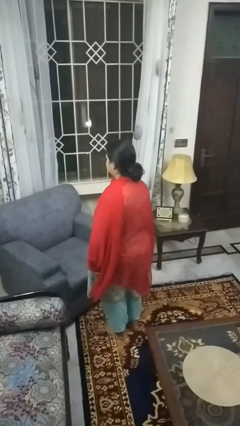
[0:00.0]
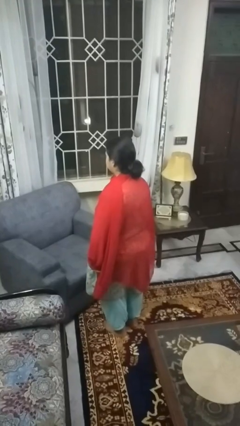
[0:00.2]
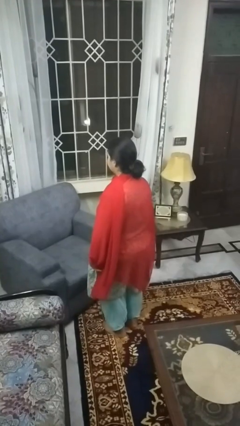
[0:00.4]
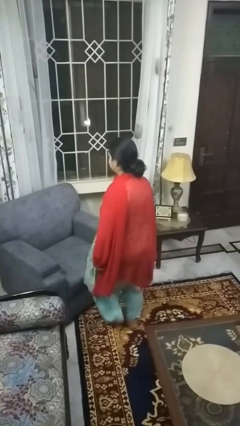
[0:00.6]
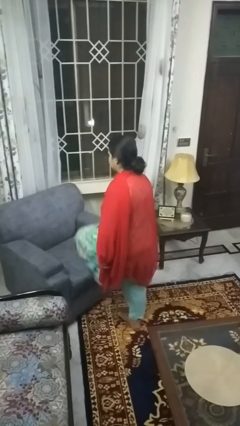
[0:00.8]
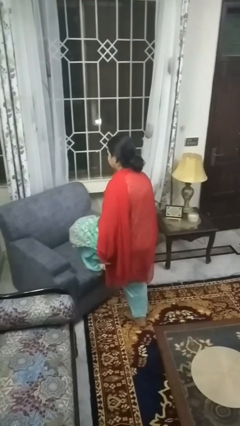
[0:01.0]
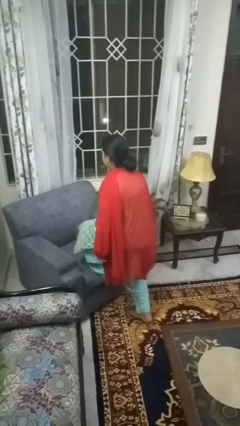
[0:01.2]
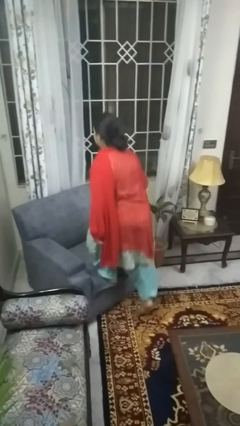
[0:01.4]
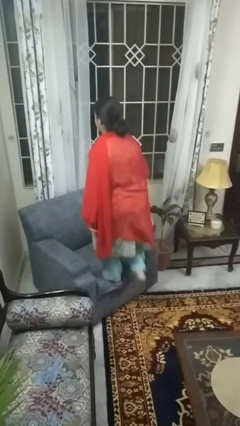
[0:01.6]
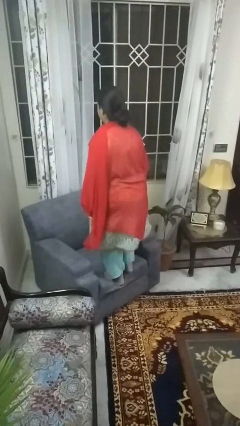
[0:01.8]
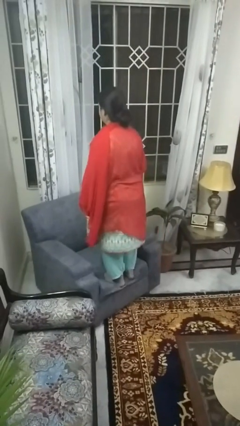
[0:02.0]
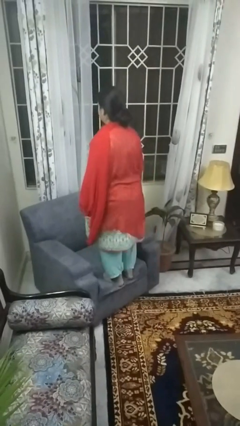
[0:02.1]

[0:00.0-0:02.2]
person climbs on couch

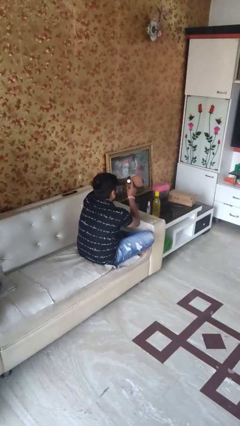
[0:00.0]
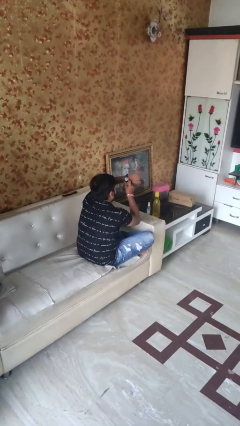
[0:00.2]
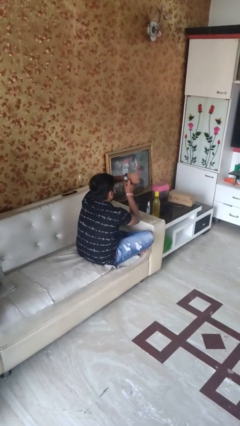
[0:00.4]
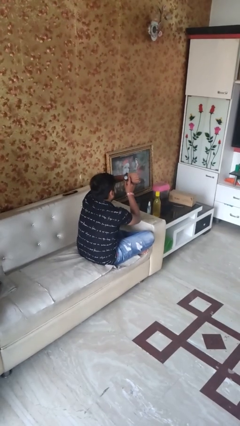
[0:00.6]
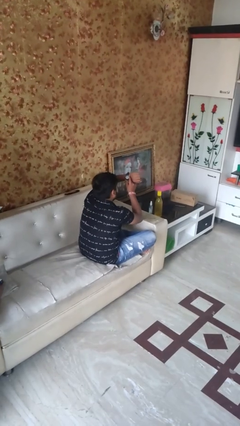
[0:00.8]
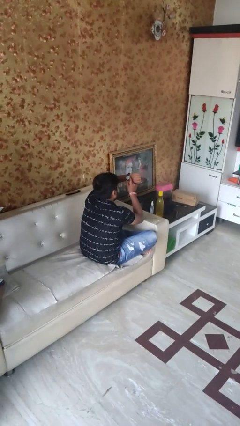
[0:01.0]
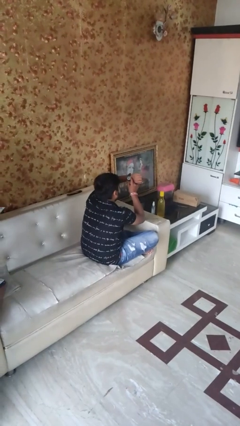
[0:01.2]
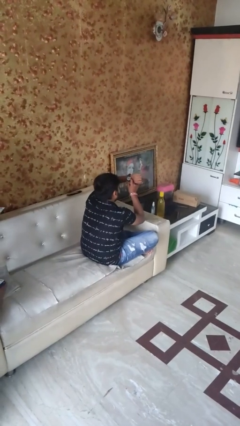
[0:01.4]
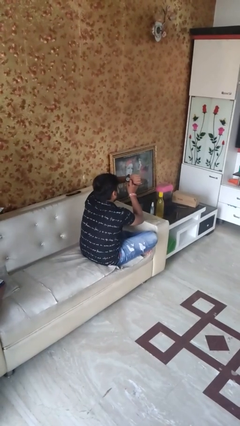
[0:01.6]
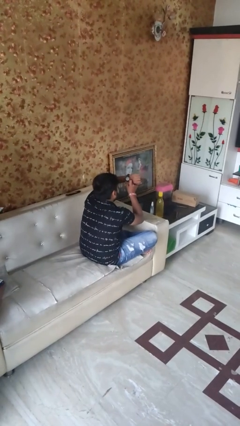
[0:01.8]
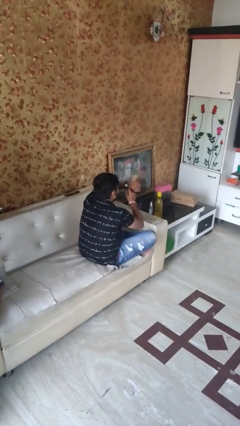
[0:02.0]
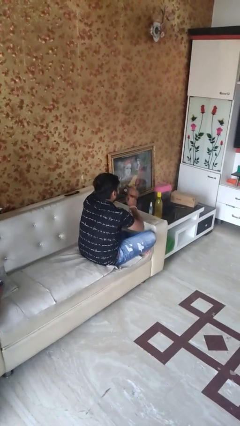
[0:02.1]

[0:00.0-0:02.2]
person looks at wristwatch

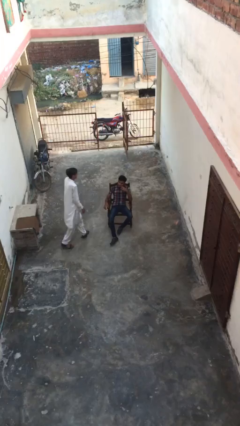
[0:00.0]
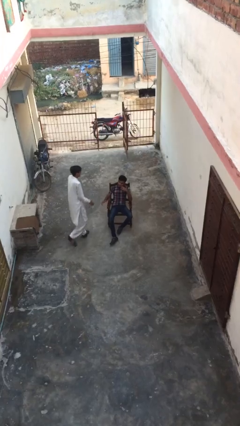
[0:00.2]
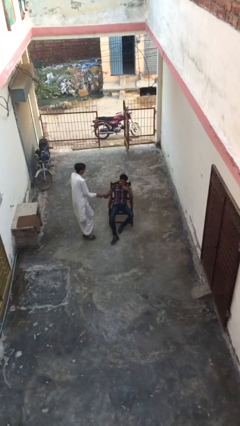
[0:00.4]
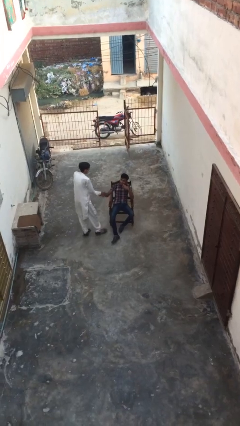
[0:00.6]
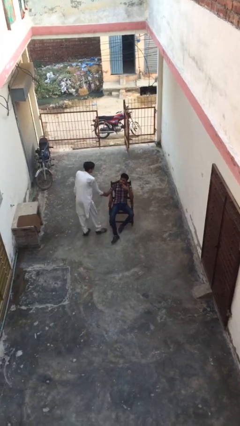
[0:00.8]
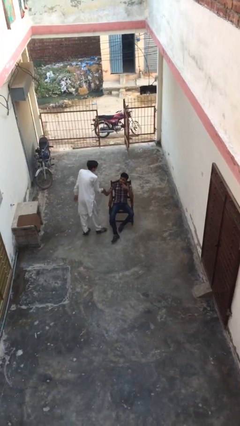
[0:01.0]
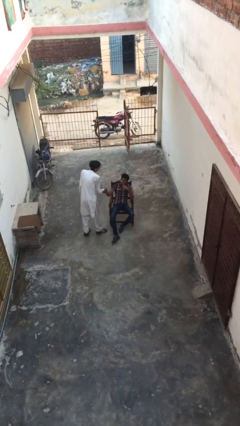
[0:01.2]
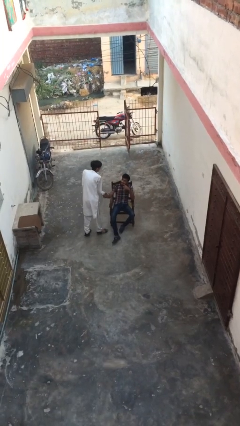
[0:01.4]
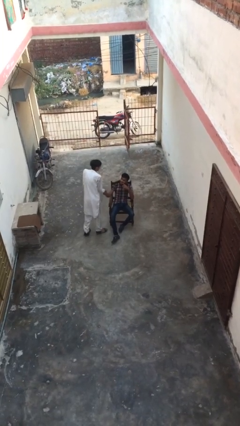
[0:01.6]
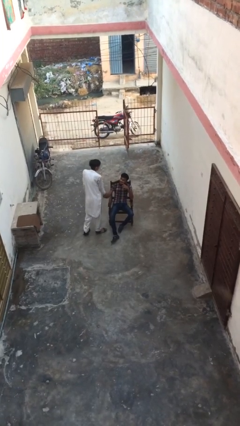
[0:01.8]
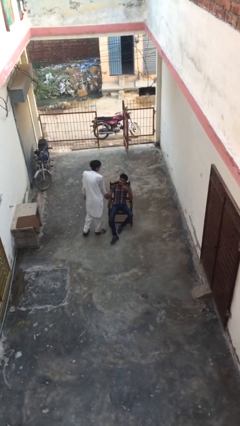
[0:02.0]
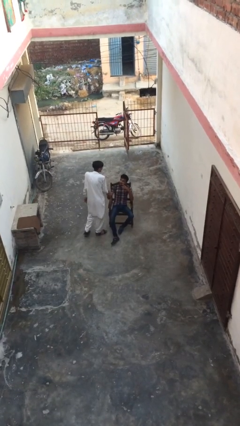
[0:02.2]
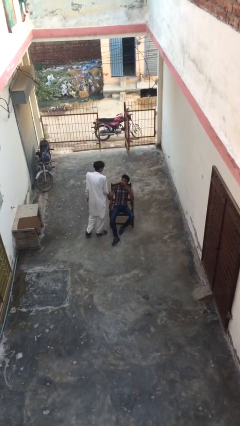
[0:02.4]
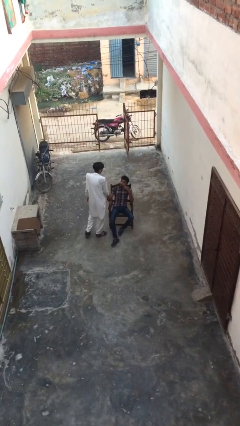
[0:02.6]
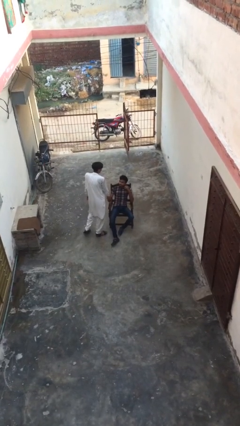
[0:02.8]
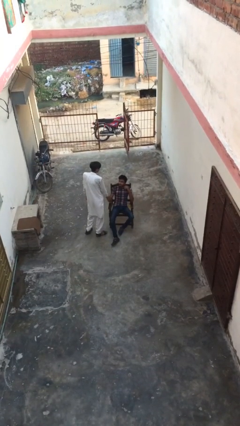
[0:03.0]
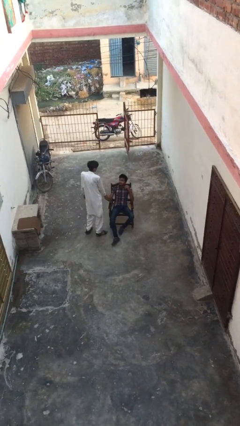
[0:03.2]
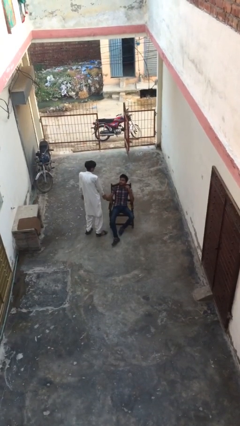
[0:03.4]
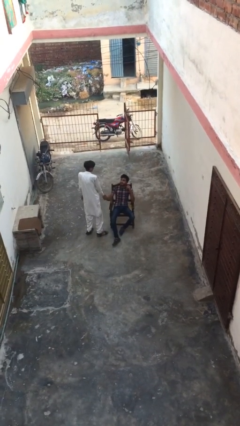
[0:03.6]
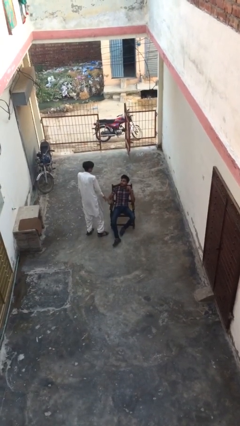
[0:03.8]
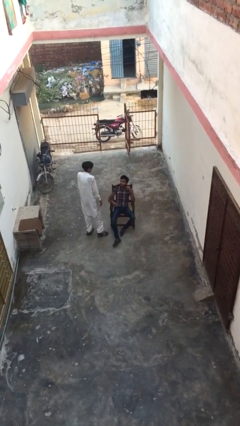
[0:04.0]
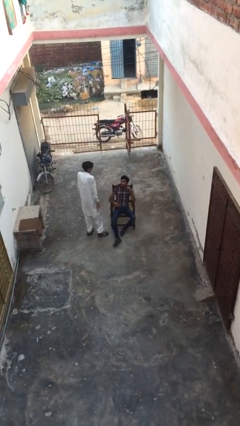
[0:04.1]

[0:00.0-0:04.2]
person shakes hand

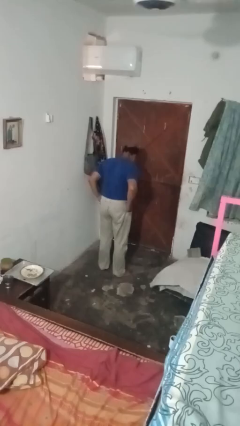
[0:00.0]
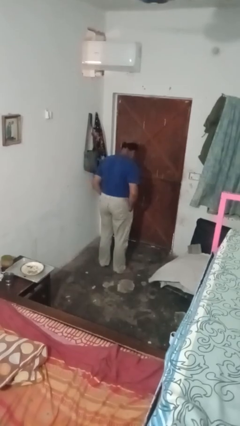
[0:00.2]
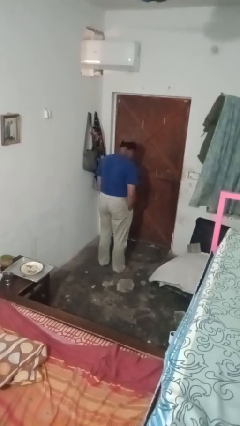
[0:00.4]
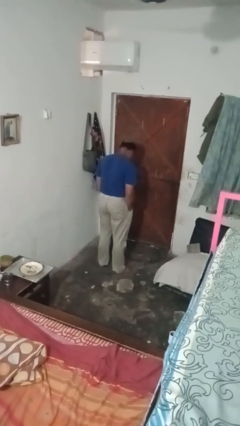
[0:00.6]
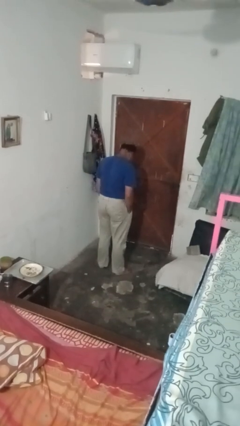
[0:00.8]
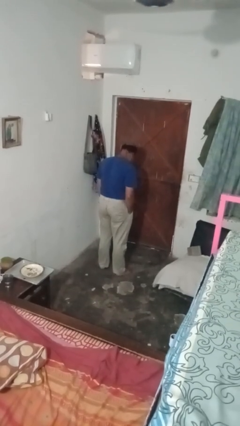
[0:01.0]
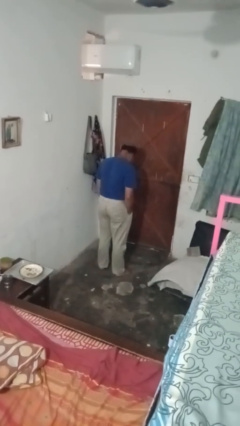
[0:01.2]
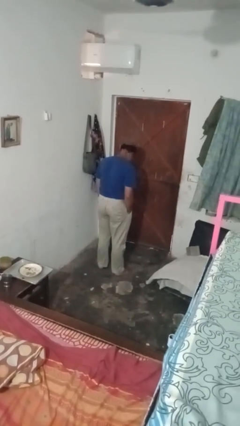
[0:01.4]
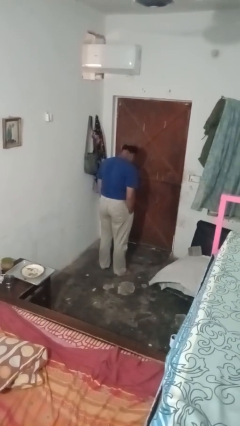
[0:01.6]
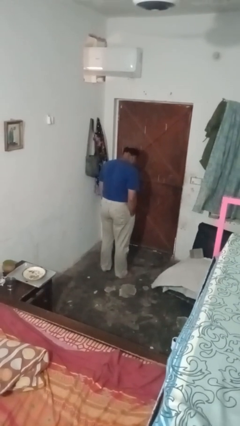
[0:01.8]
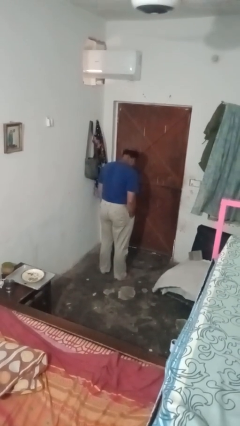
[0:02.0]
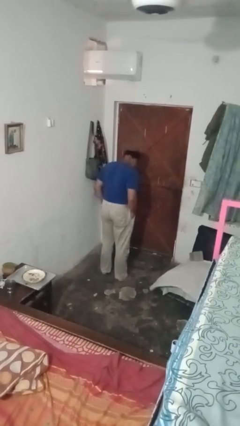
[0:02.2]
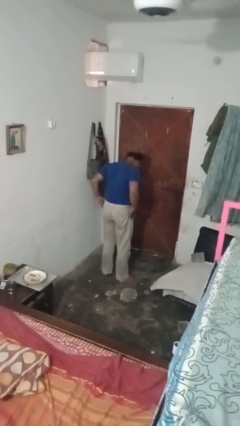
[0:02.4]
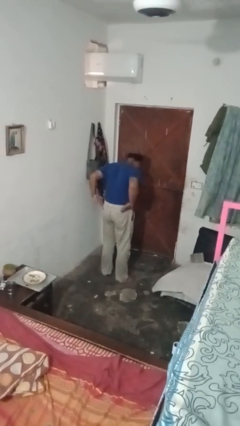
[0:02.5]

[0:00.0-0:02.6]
person puts hands in back pockets

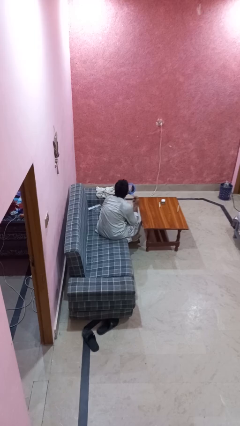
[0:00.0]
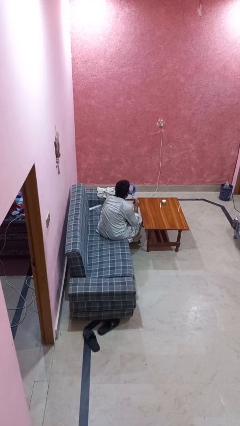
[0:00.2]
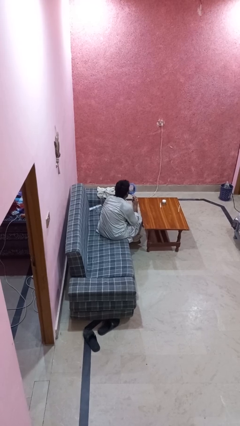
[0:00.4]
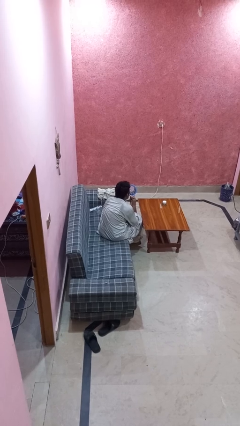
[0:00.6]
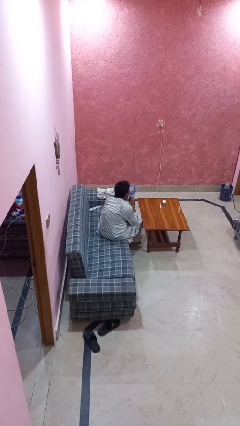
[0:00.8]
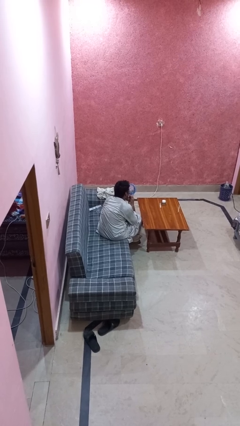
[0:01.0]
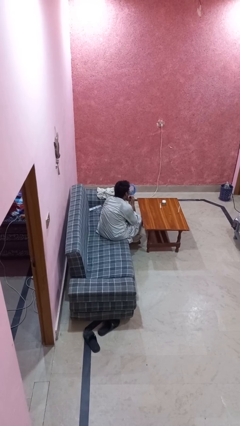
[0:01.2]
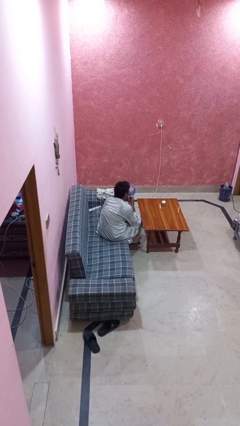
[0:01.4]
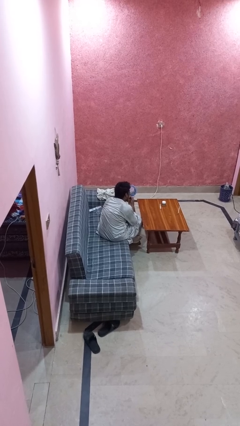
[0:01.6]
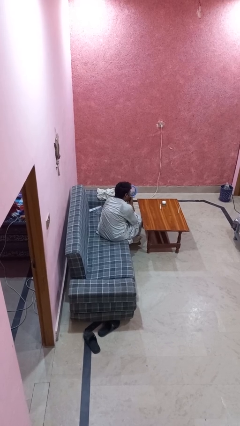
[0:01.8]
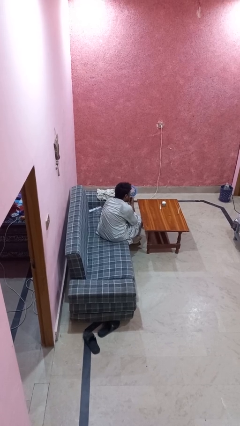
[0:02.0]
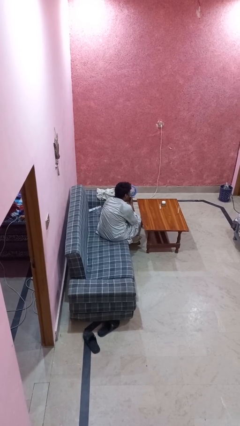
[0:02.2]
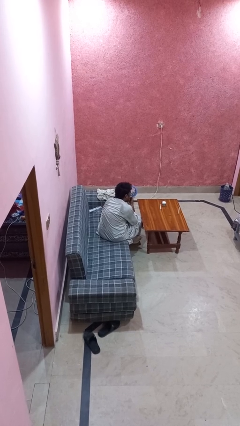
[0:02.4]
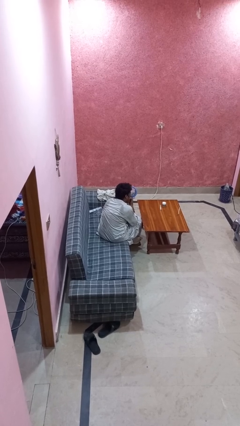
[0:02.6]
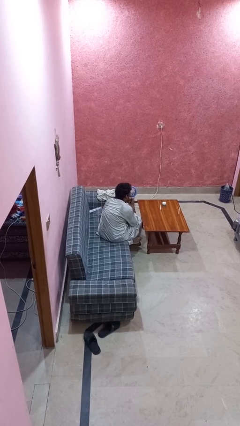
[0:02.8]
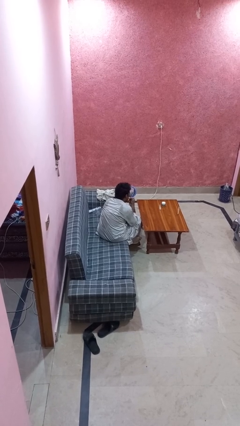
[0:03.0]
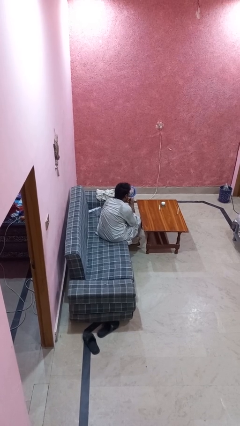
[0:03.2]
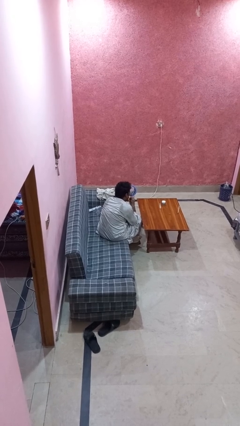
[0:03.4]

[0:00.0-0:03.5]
person applies lip makeup

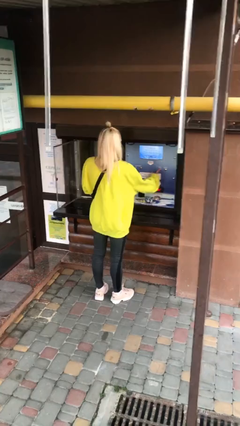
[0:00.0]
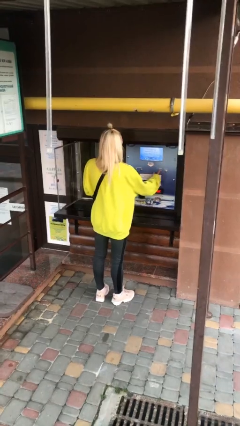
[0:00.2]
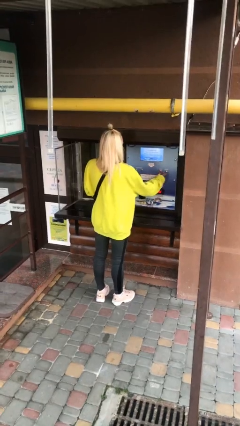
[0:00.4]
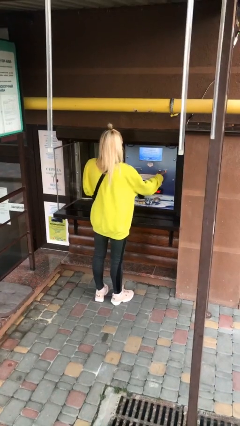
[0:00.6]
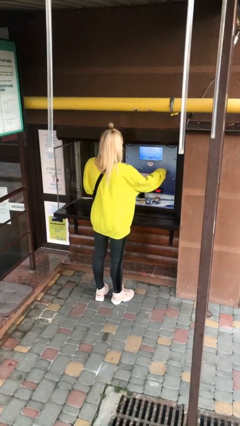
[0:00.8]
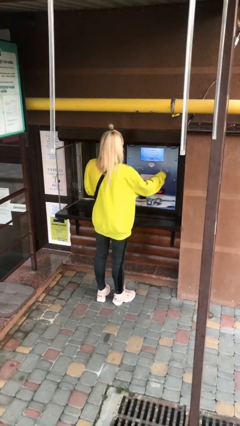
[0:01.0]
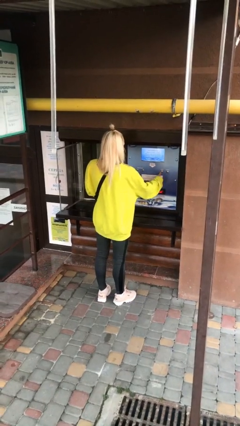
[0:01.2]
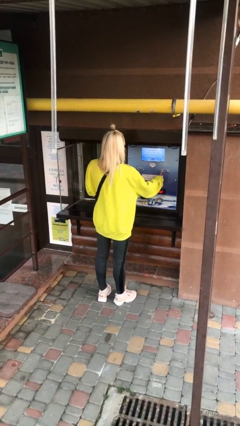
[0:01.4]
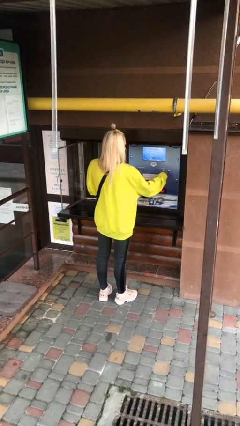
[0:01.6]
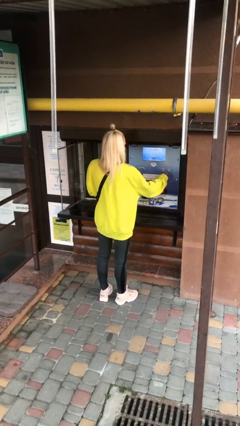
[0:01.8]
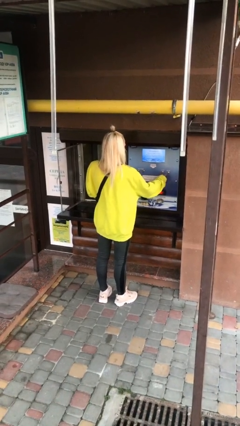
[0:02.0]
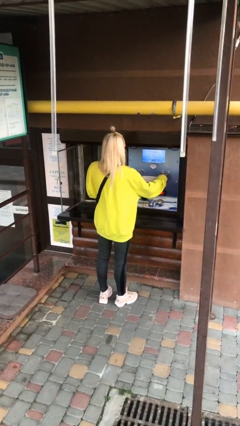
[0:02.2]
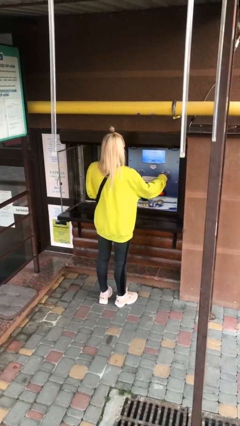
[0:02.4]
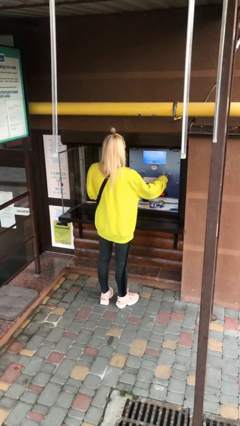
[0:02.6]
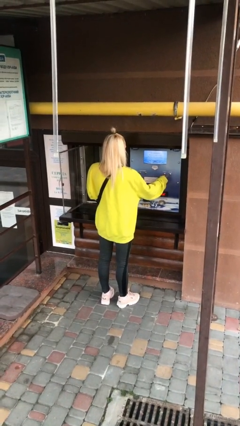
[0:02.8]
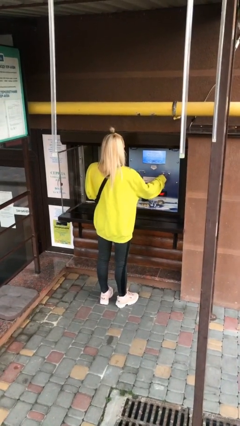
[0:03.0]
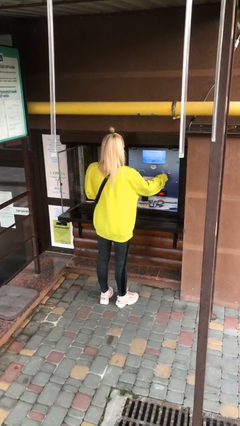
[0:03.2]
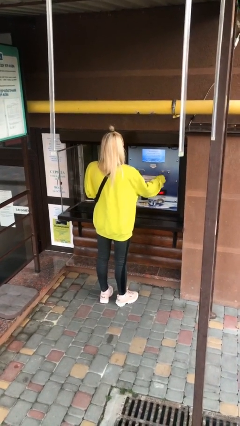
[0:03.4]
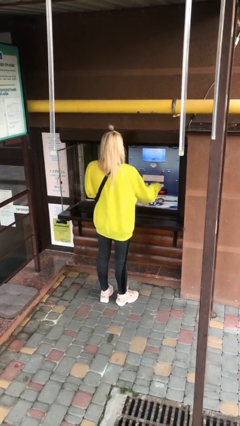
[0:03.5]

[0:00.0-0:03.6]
person purchases from machine
